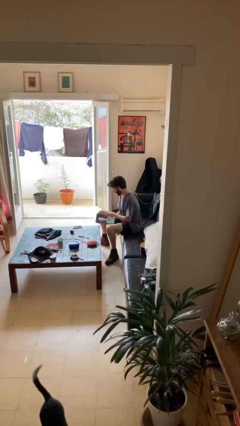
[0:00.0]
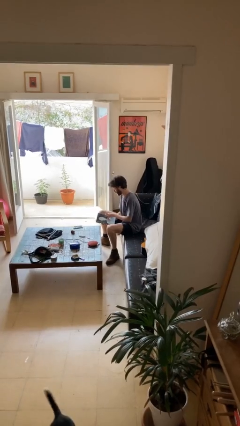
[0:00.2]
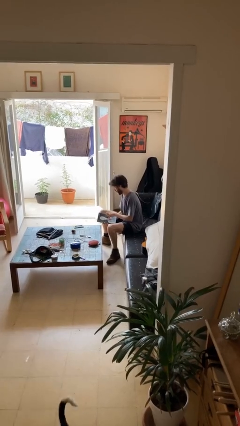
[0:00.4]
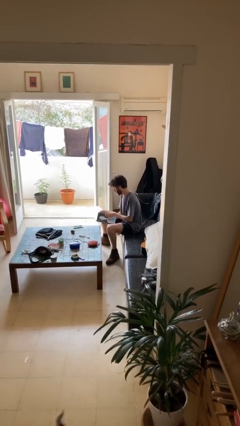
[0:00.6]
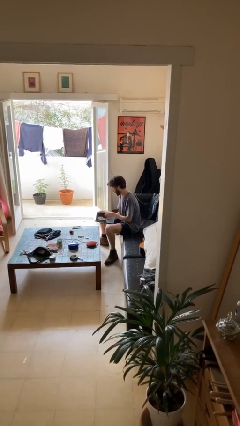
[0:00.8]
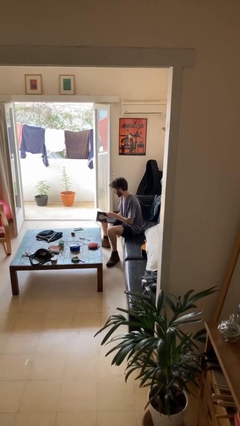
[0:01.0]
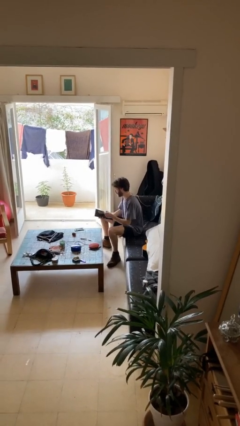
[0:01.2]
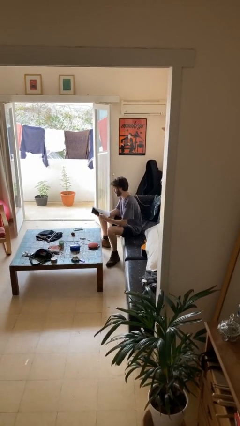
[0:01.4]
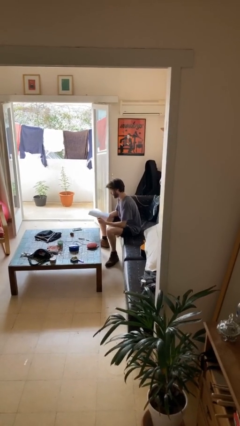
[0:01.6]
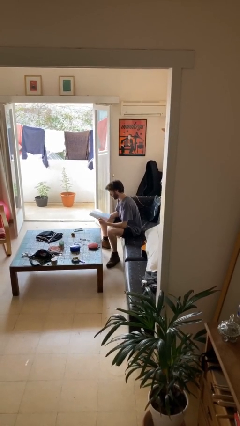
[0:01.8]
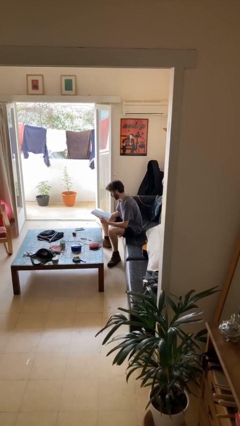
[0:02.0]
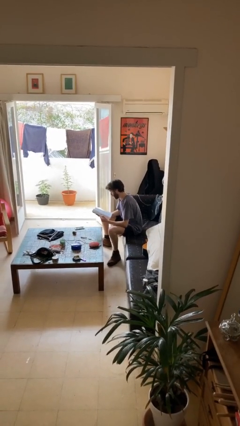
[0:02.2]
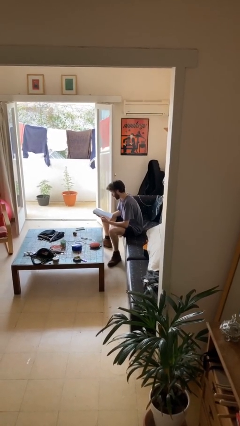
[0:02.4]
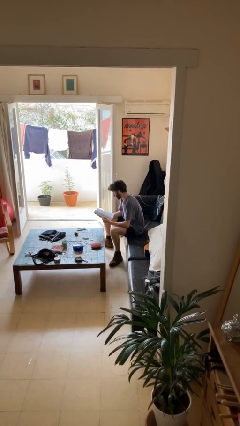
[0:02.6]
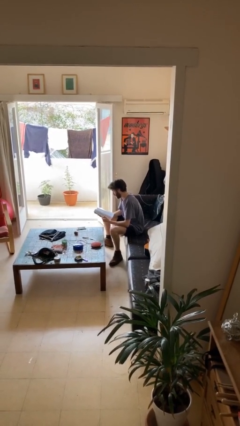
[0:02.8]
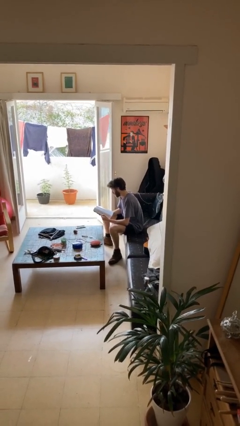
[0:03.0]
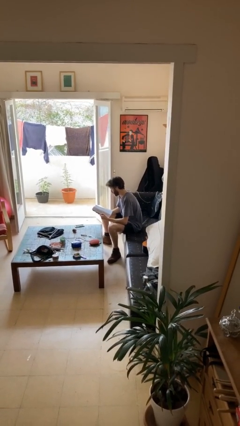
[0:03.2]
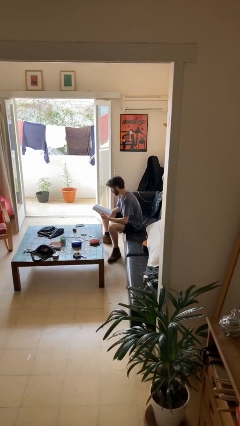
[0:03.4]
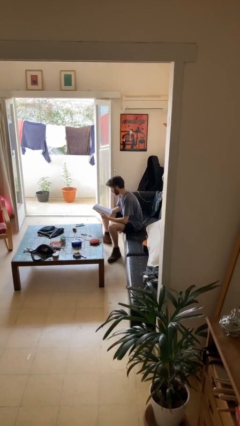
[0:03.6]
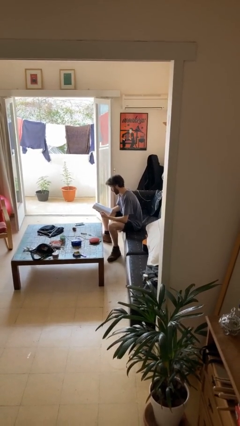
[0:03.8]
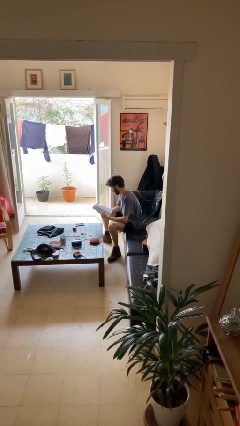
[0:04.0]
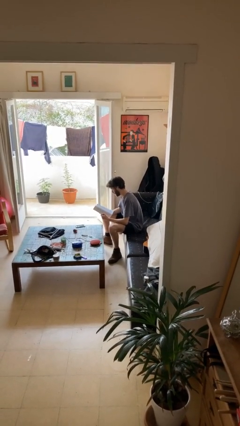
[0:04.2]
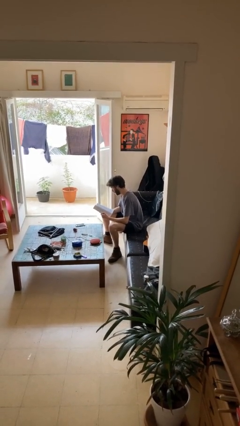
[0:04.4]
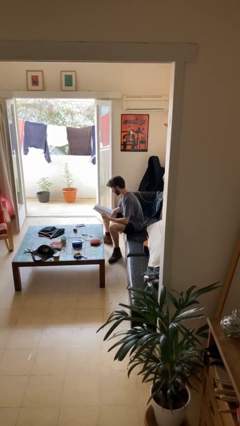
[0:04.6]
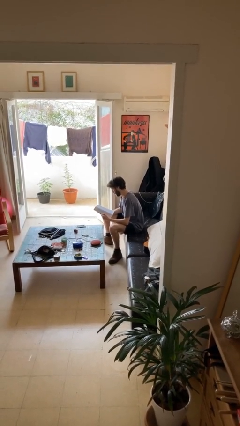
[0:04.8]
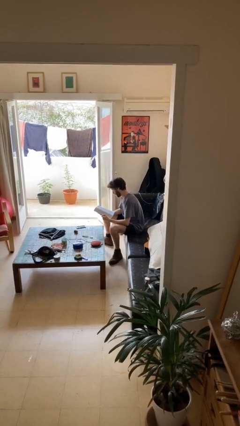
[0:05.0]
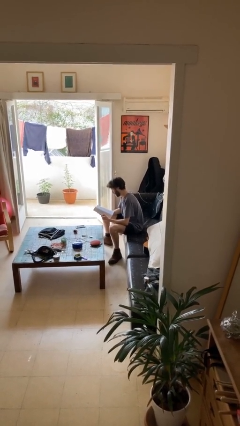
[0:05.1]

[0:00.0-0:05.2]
person reads document

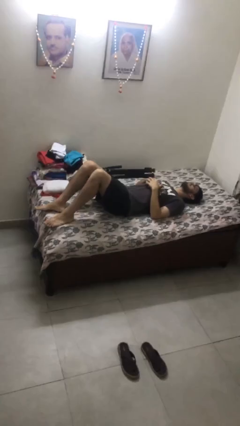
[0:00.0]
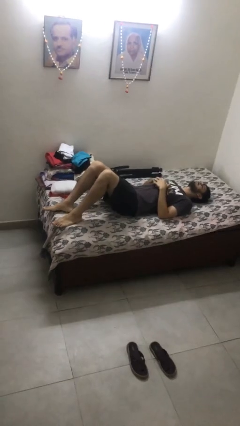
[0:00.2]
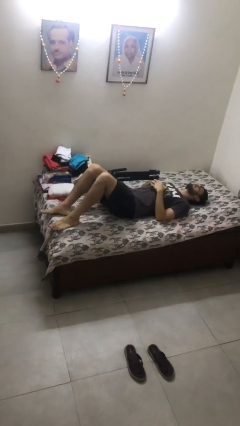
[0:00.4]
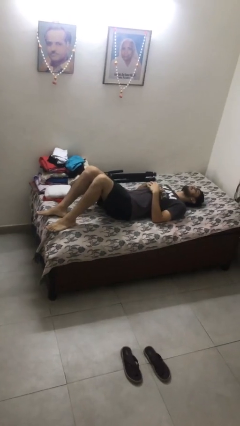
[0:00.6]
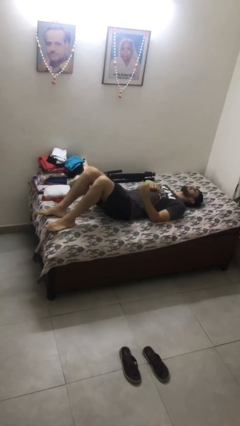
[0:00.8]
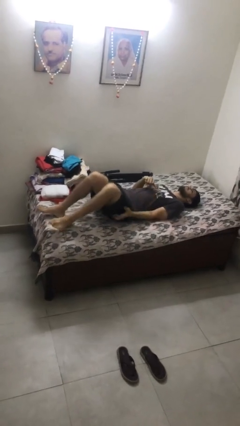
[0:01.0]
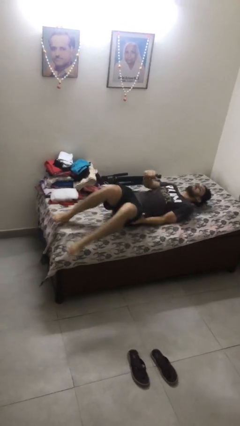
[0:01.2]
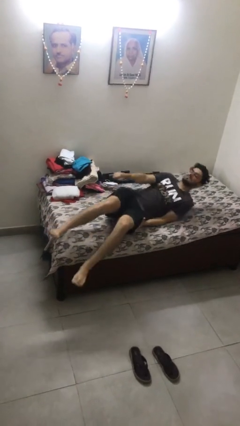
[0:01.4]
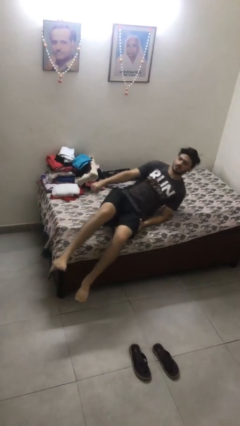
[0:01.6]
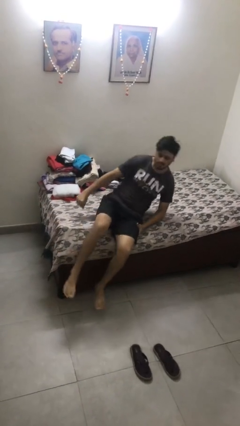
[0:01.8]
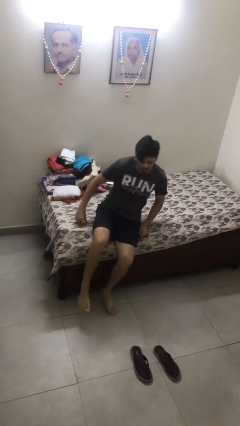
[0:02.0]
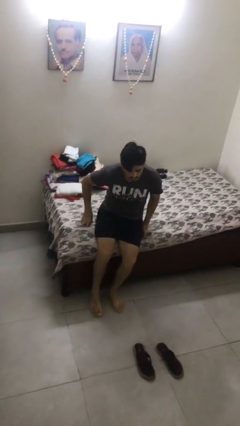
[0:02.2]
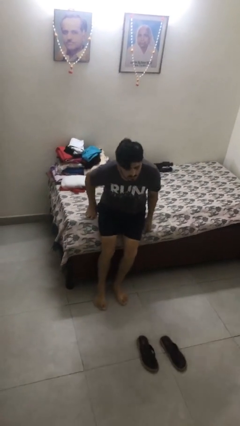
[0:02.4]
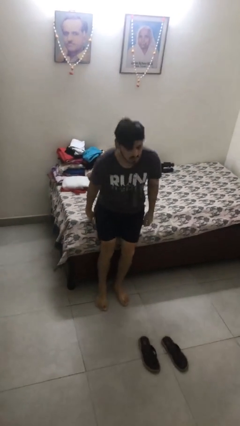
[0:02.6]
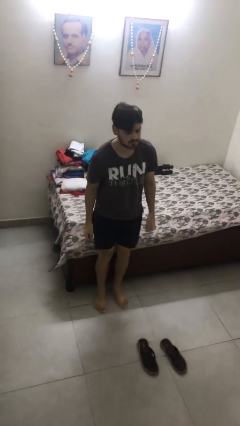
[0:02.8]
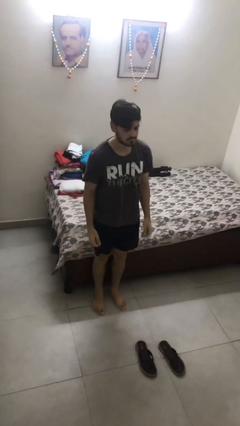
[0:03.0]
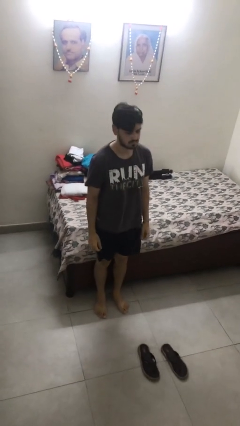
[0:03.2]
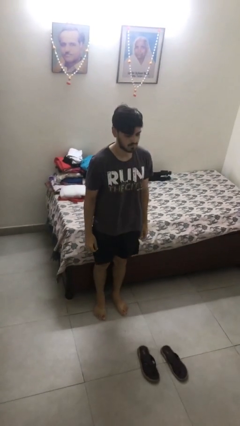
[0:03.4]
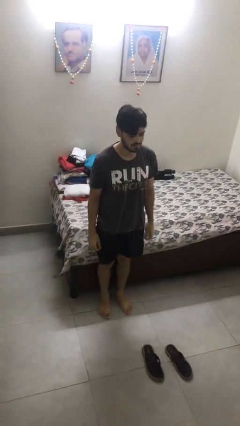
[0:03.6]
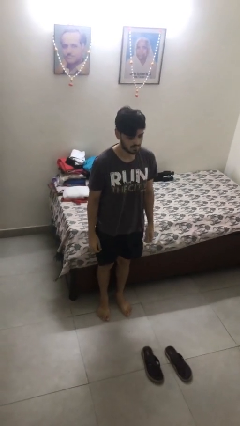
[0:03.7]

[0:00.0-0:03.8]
person stands up

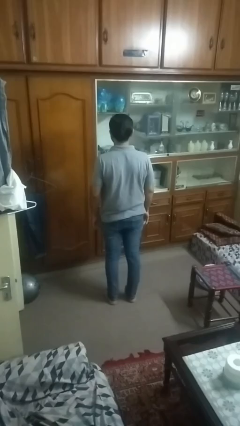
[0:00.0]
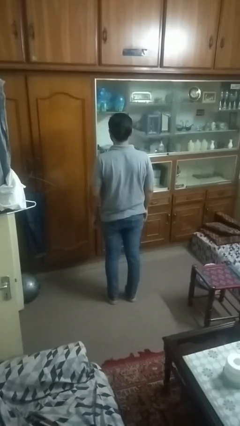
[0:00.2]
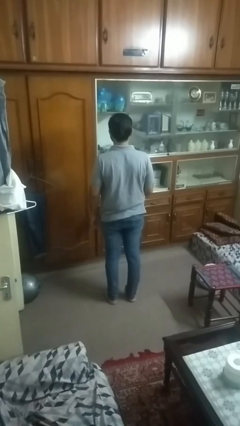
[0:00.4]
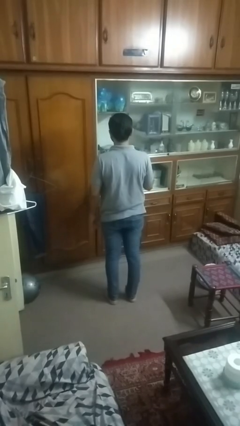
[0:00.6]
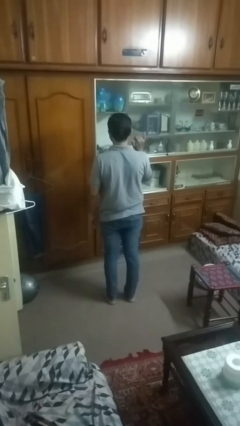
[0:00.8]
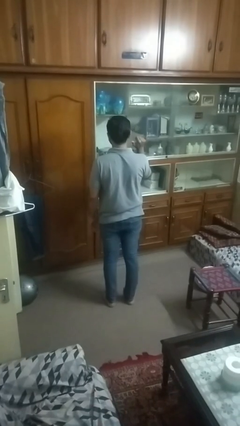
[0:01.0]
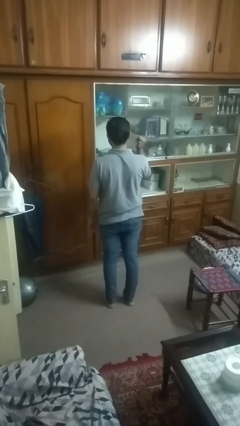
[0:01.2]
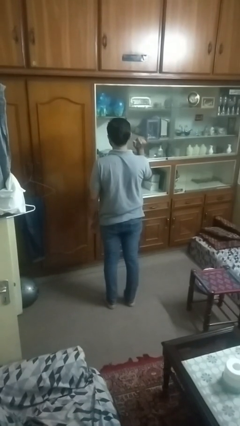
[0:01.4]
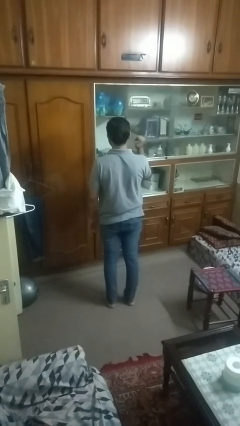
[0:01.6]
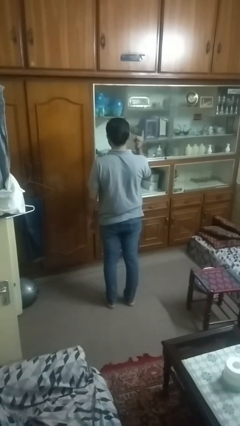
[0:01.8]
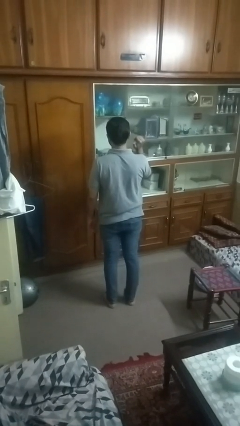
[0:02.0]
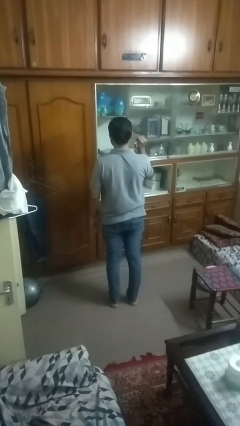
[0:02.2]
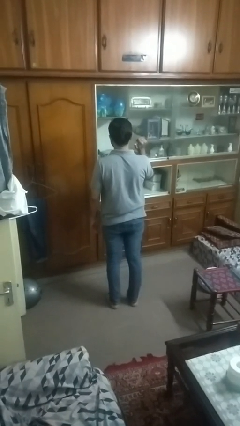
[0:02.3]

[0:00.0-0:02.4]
person gestures hang loose

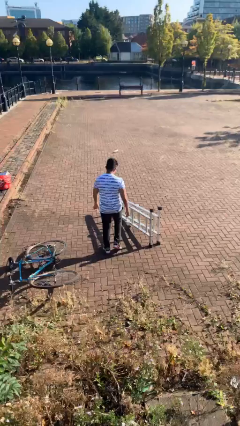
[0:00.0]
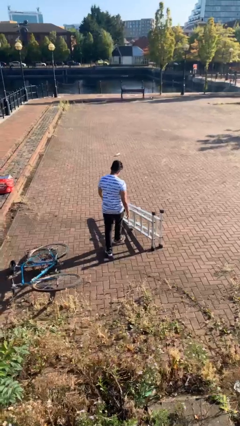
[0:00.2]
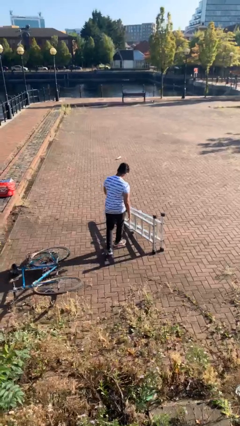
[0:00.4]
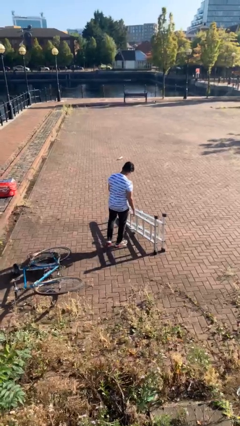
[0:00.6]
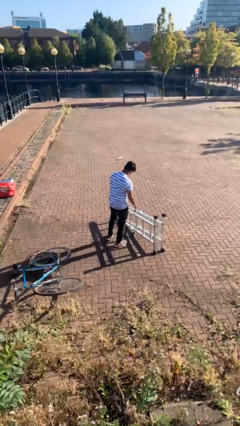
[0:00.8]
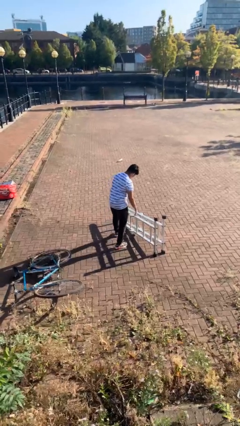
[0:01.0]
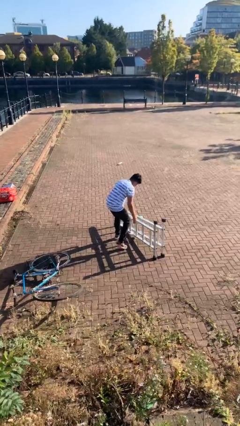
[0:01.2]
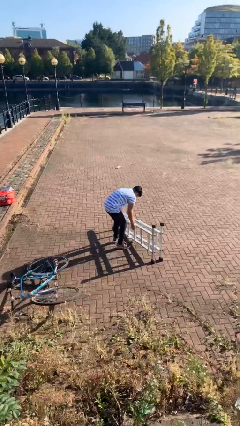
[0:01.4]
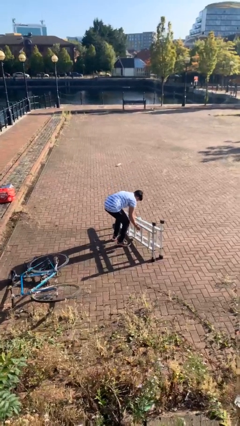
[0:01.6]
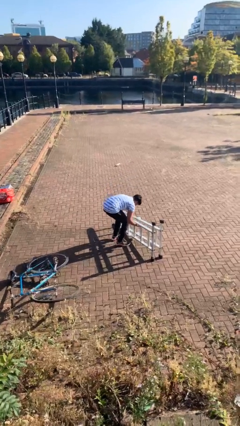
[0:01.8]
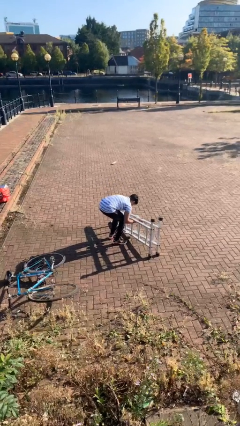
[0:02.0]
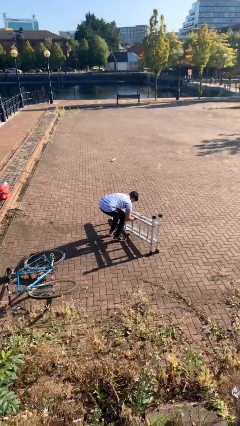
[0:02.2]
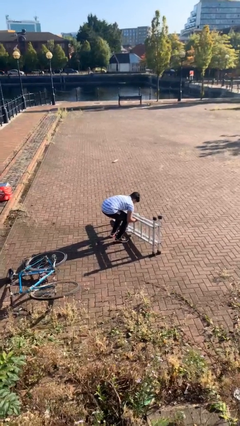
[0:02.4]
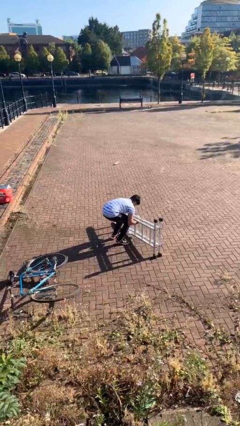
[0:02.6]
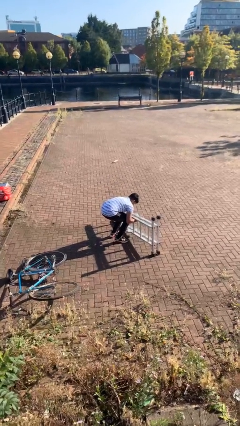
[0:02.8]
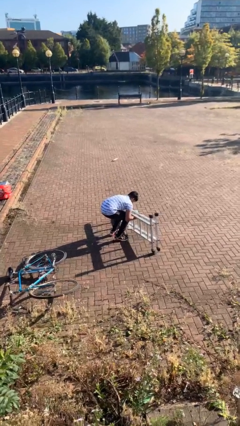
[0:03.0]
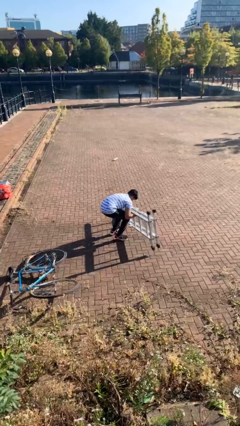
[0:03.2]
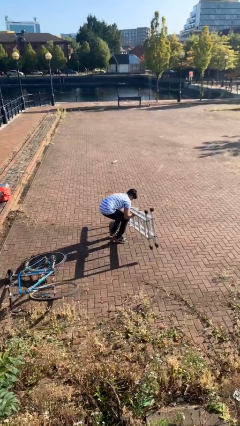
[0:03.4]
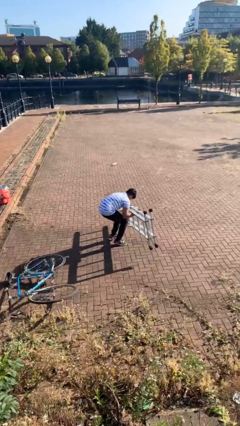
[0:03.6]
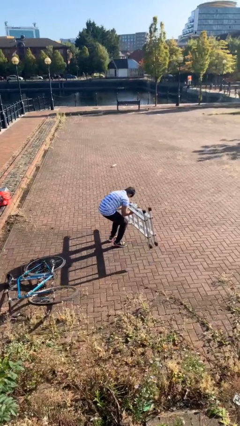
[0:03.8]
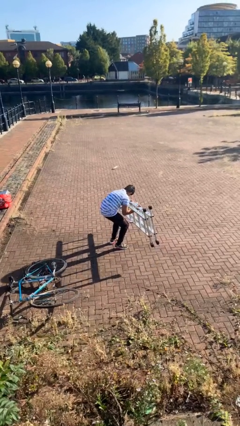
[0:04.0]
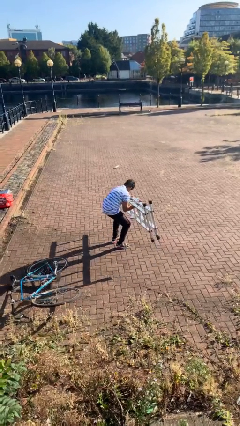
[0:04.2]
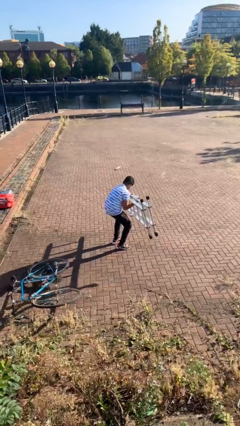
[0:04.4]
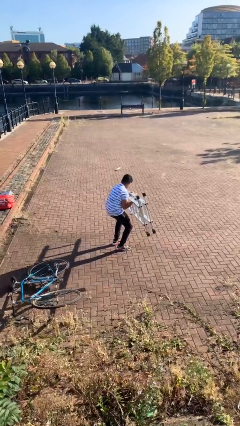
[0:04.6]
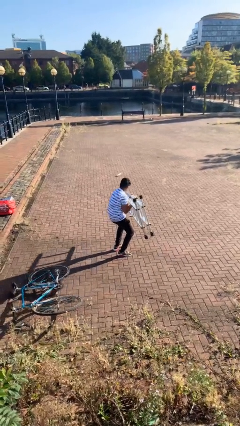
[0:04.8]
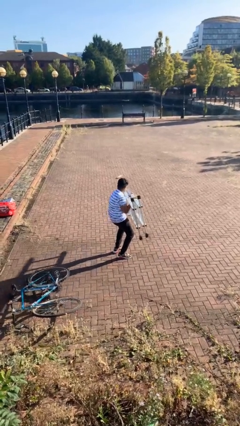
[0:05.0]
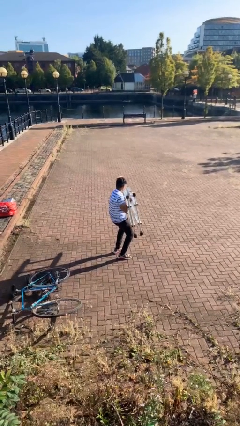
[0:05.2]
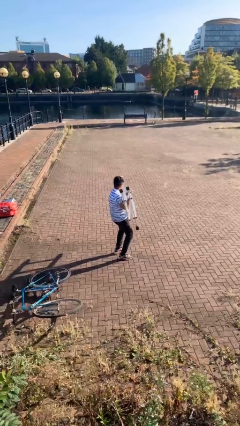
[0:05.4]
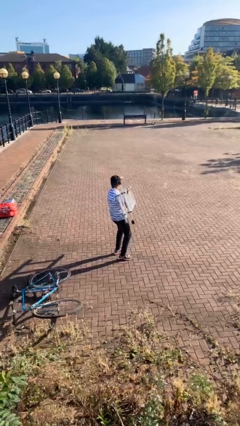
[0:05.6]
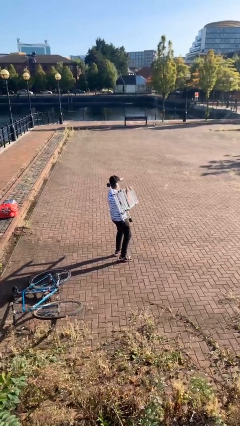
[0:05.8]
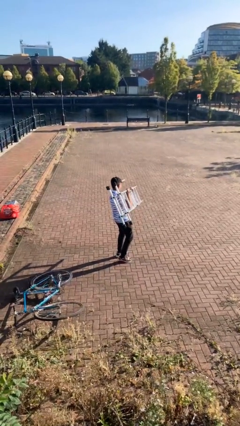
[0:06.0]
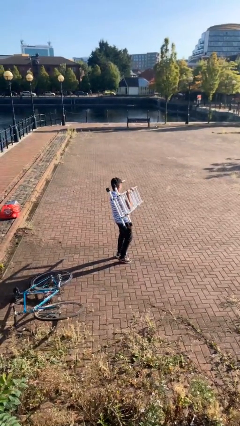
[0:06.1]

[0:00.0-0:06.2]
person picks up object from floor

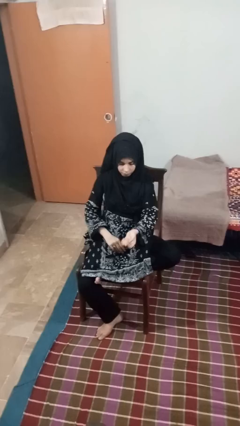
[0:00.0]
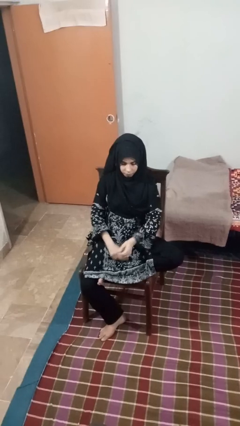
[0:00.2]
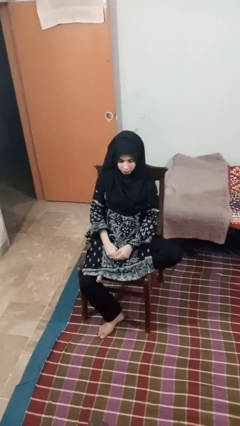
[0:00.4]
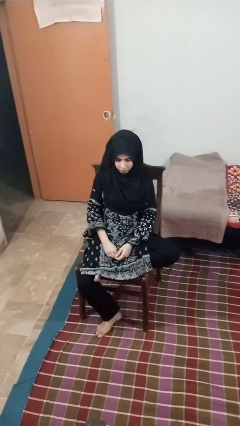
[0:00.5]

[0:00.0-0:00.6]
person swats bug
